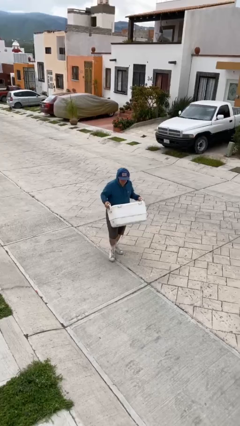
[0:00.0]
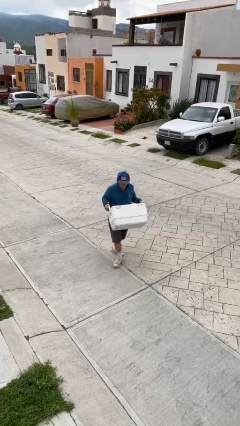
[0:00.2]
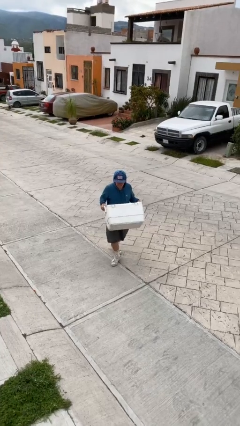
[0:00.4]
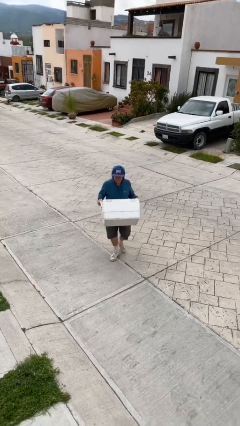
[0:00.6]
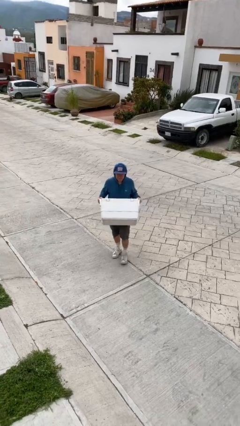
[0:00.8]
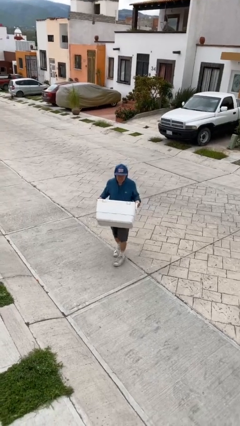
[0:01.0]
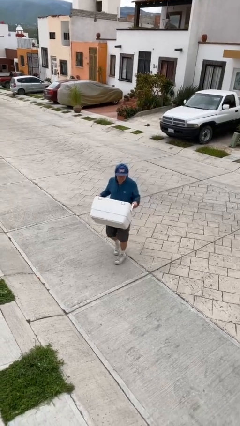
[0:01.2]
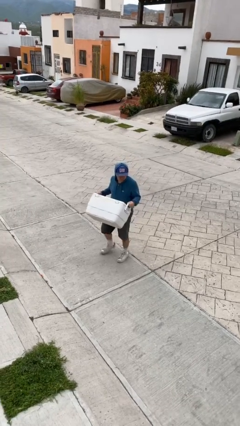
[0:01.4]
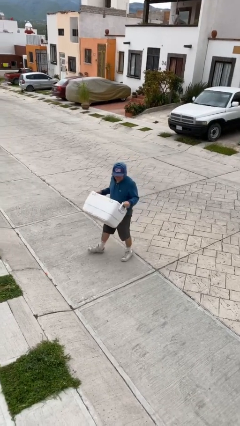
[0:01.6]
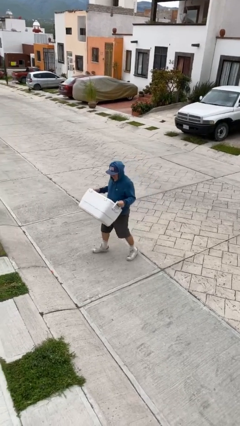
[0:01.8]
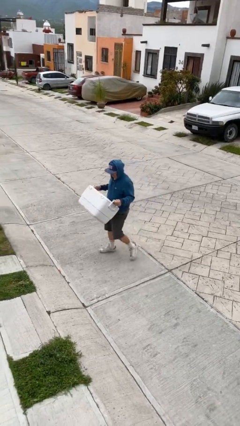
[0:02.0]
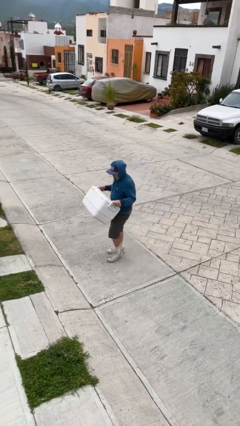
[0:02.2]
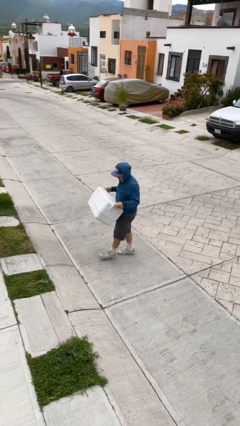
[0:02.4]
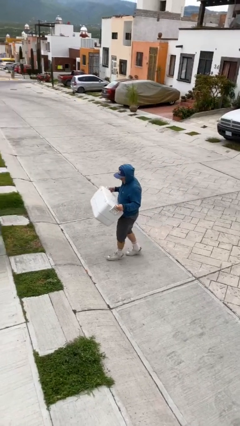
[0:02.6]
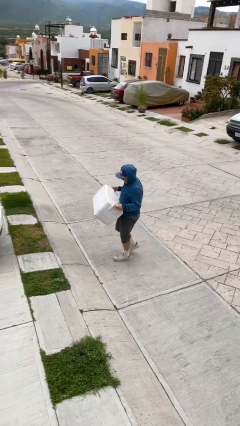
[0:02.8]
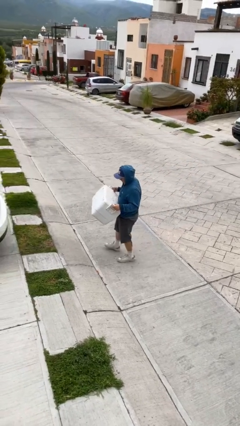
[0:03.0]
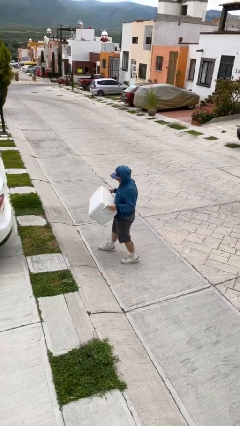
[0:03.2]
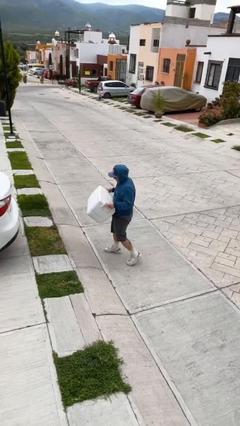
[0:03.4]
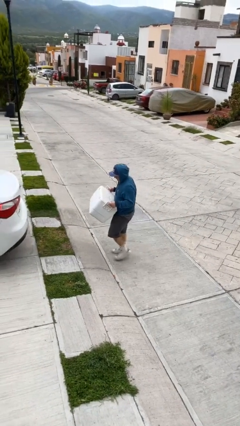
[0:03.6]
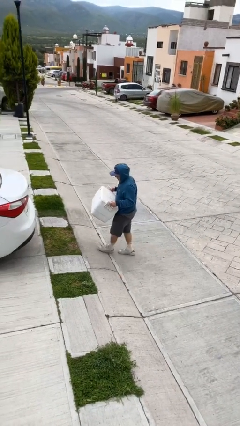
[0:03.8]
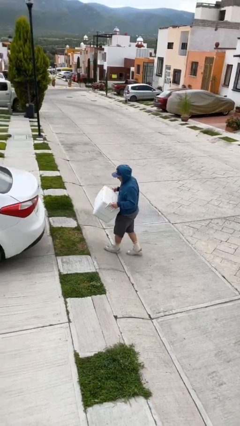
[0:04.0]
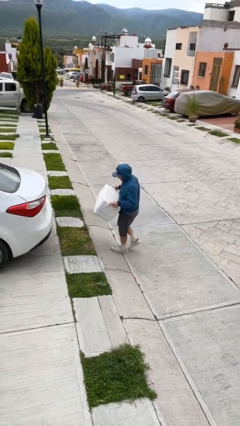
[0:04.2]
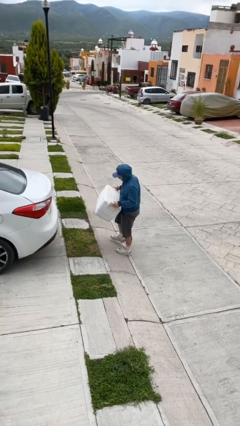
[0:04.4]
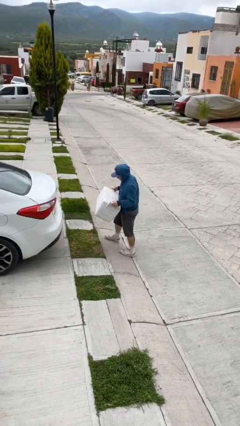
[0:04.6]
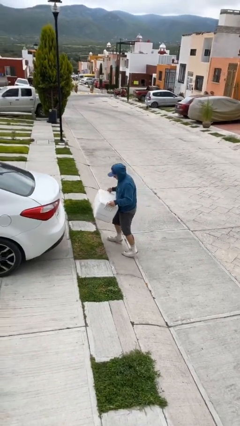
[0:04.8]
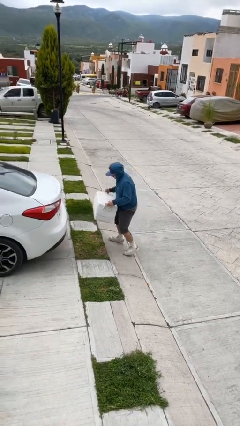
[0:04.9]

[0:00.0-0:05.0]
person carries heavy object

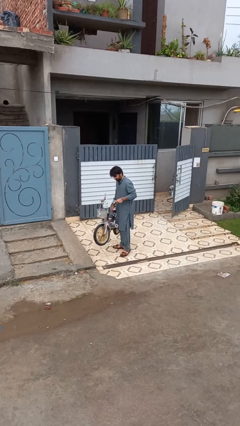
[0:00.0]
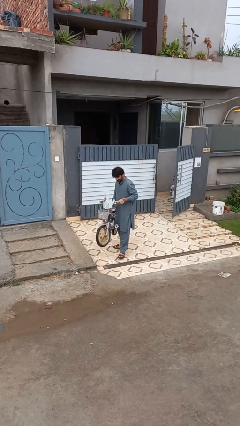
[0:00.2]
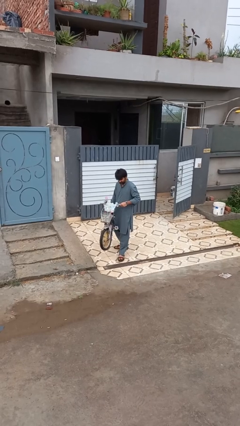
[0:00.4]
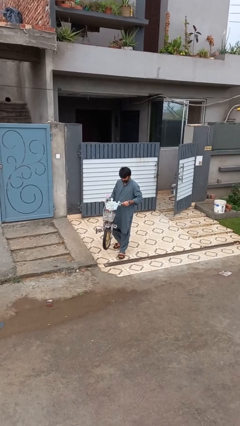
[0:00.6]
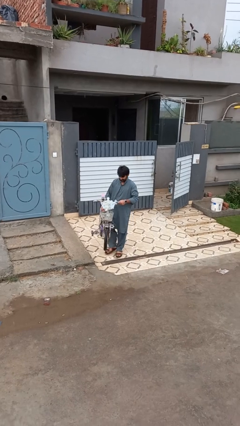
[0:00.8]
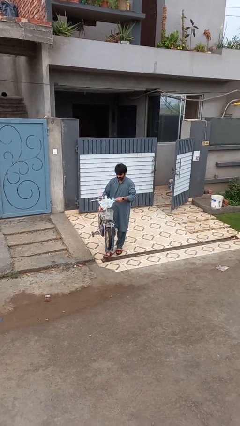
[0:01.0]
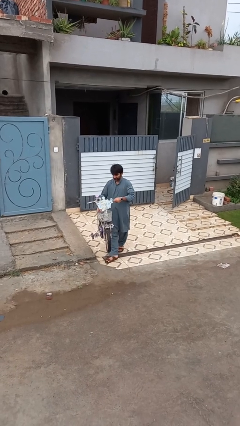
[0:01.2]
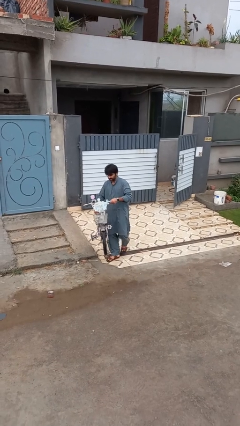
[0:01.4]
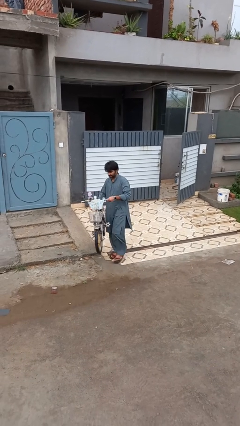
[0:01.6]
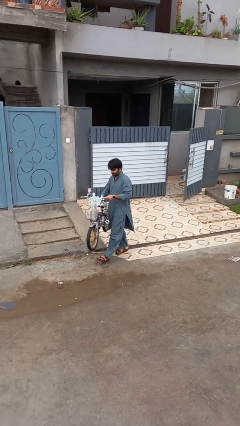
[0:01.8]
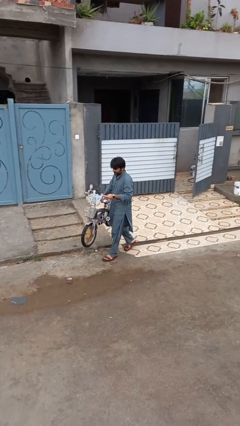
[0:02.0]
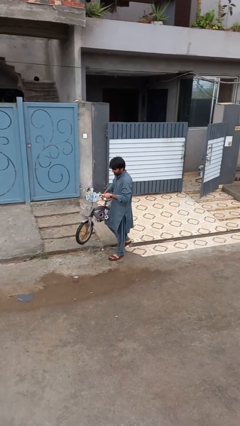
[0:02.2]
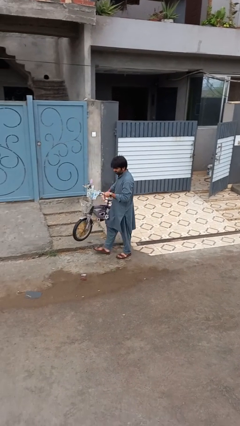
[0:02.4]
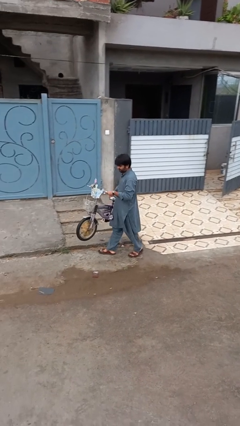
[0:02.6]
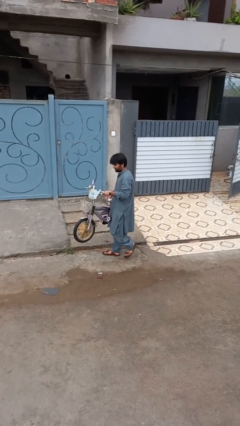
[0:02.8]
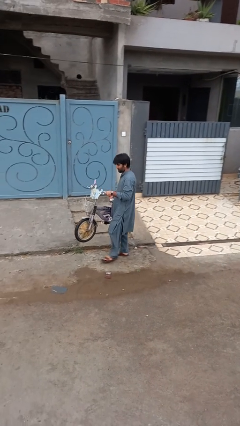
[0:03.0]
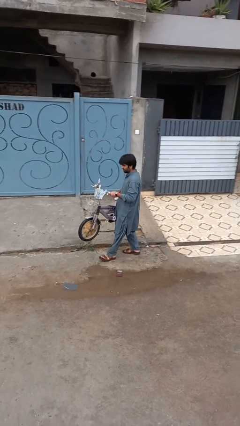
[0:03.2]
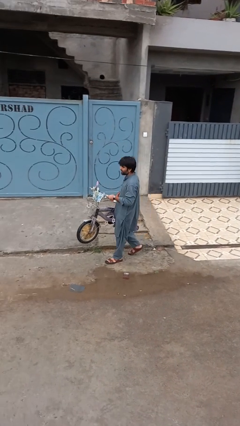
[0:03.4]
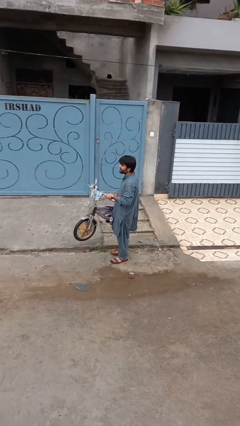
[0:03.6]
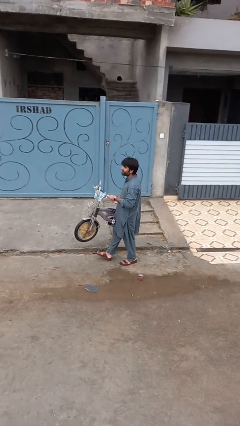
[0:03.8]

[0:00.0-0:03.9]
person carries bicycle

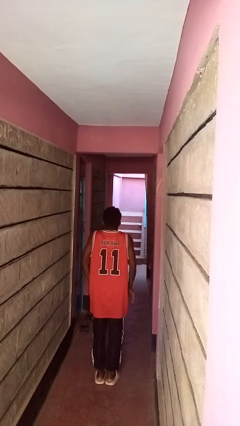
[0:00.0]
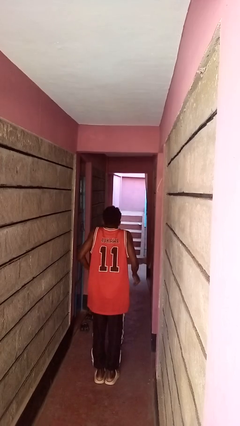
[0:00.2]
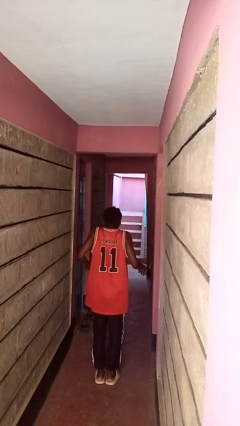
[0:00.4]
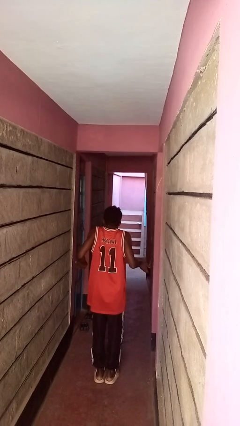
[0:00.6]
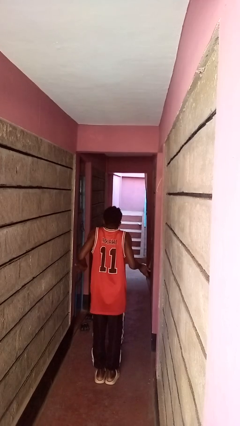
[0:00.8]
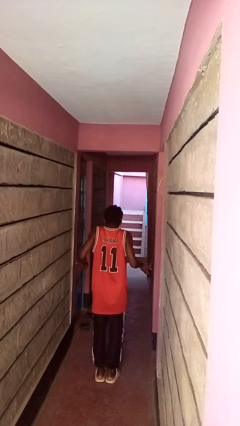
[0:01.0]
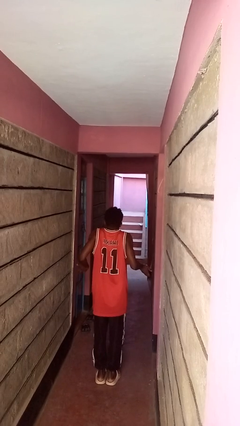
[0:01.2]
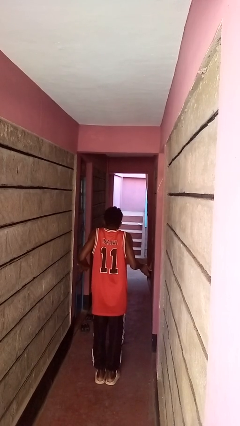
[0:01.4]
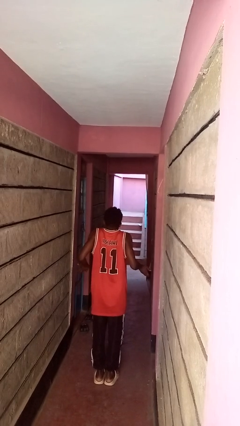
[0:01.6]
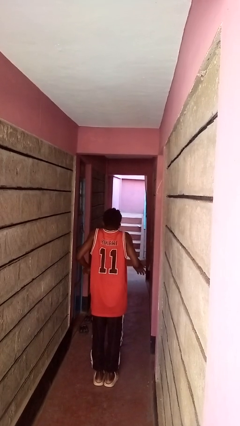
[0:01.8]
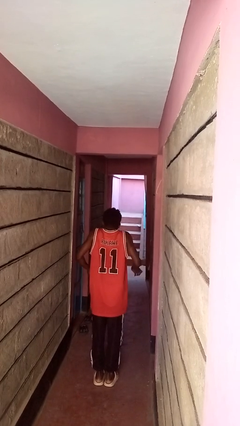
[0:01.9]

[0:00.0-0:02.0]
person shrugs

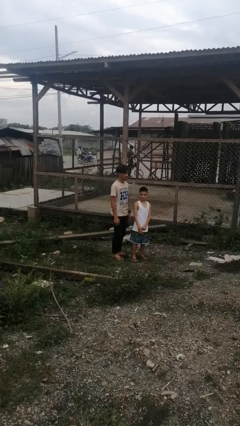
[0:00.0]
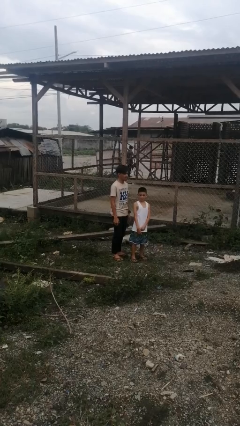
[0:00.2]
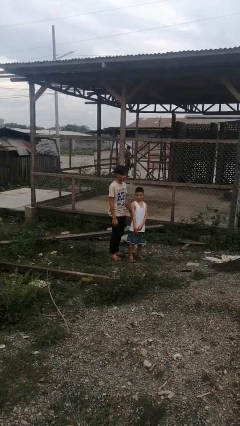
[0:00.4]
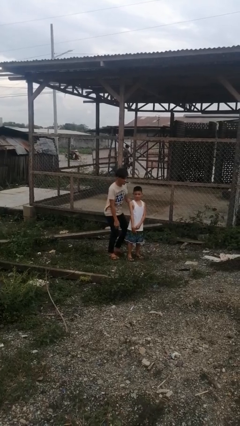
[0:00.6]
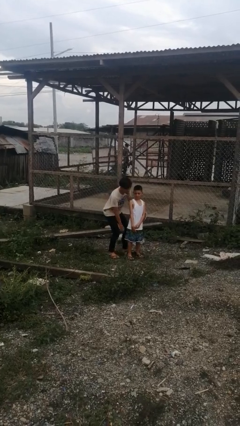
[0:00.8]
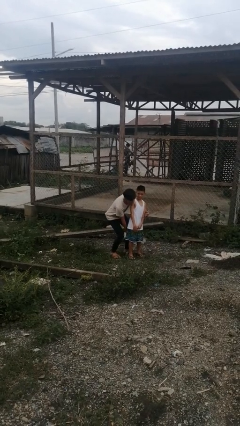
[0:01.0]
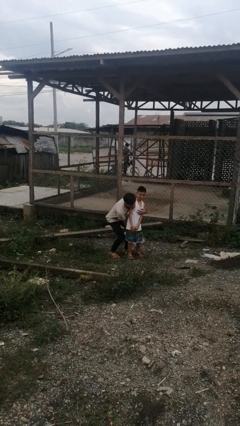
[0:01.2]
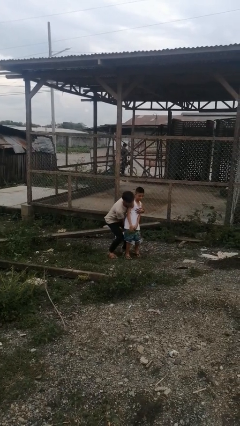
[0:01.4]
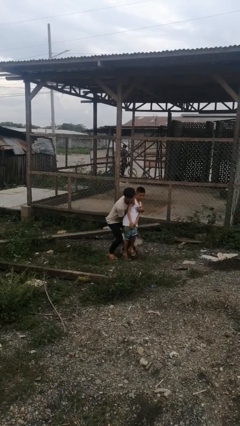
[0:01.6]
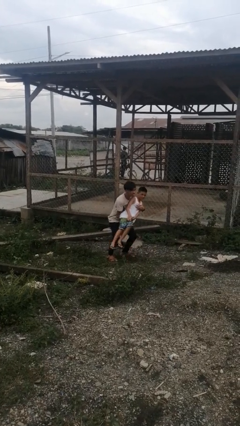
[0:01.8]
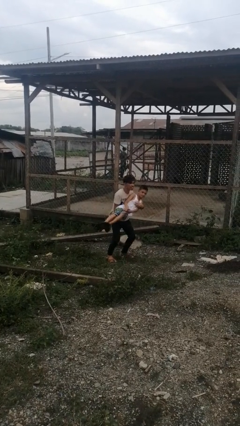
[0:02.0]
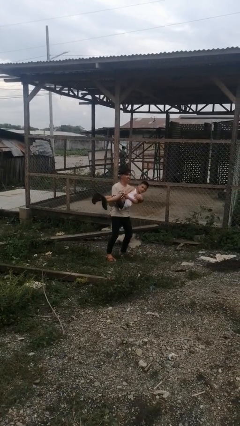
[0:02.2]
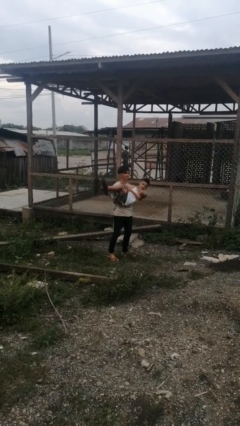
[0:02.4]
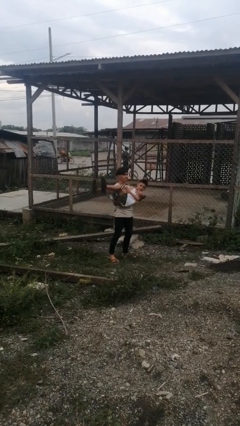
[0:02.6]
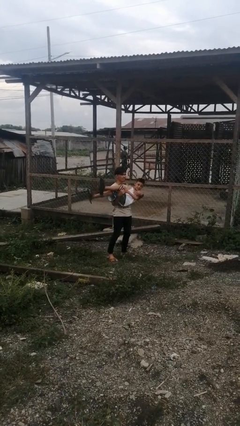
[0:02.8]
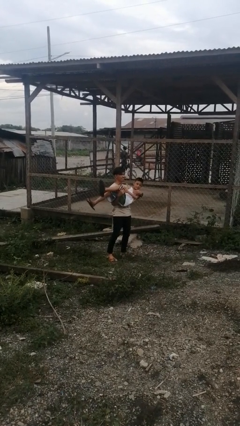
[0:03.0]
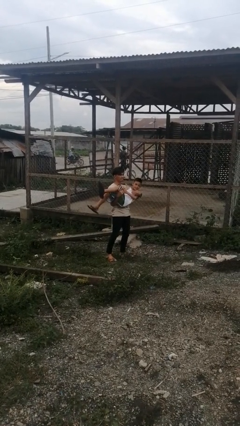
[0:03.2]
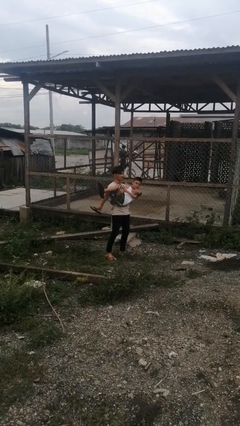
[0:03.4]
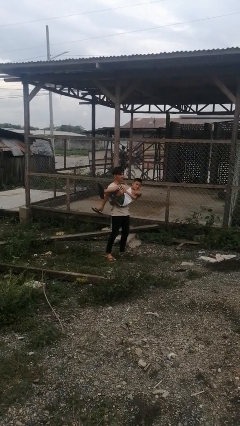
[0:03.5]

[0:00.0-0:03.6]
person picks up person

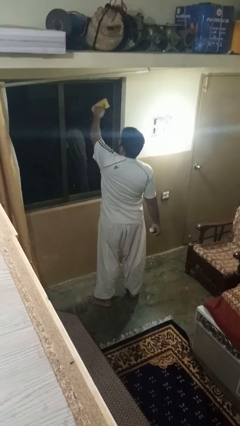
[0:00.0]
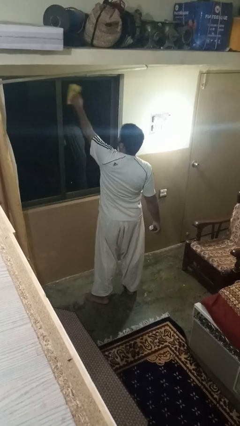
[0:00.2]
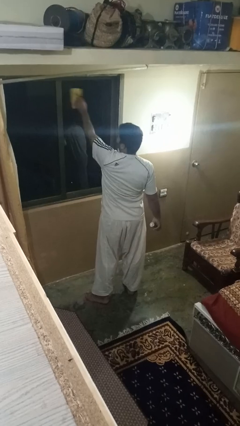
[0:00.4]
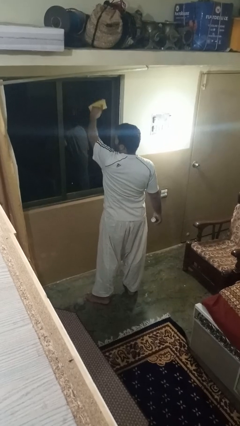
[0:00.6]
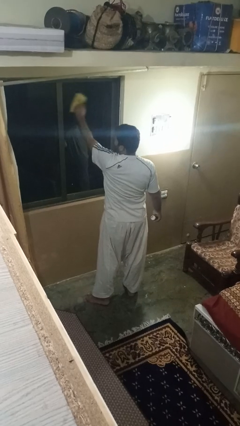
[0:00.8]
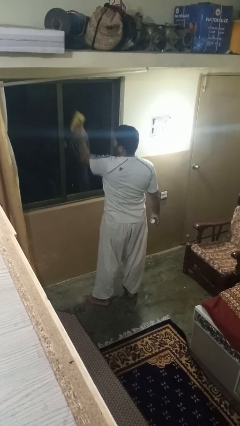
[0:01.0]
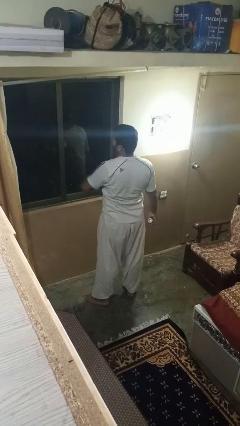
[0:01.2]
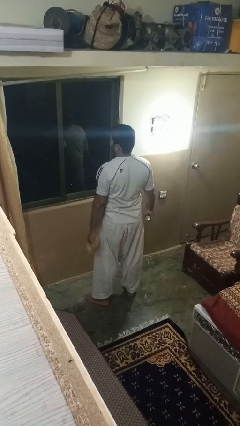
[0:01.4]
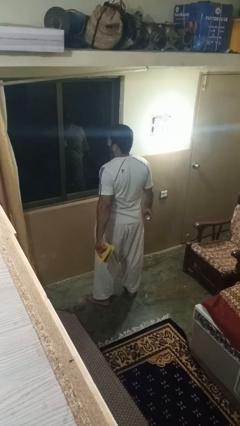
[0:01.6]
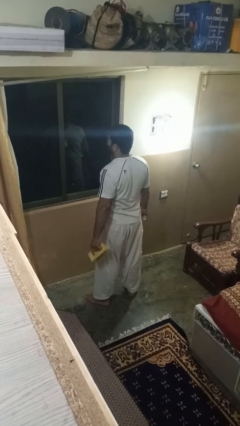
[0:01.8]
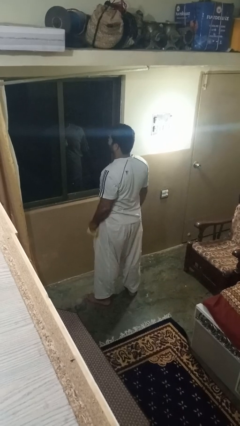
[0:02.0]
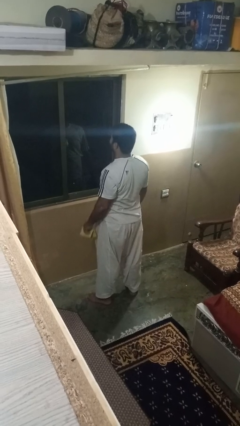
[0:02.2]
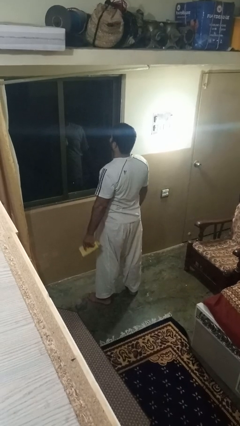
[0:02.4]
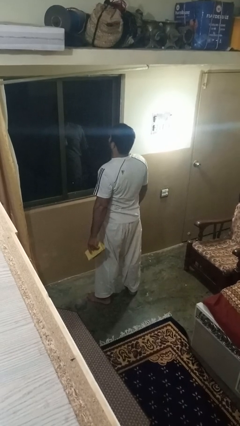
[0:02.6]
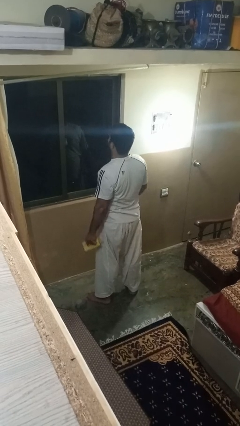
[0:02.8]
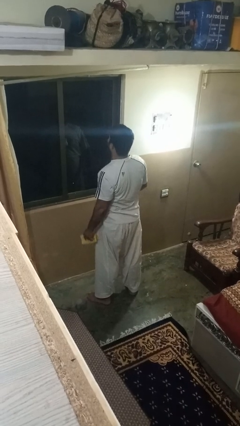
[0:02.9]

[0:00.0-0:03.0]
person sprays from bottle
